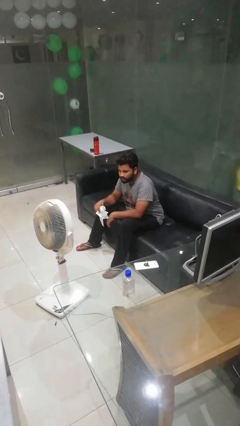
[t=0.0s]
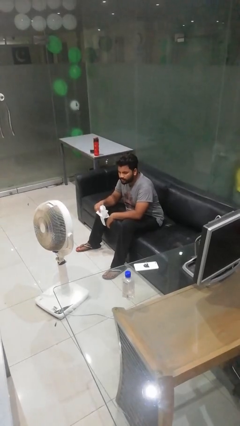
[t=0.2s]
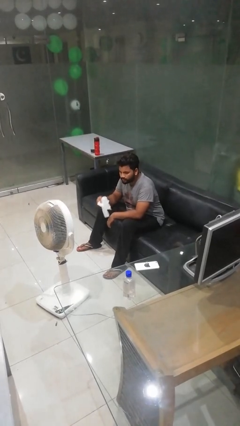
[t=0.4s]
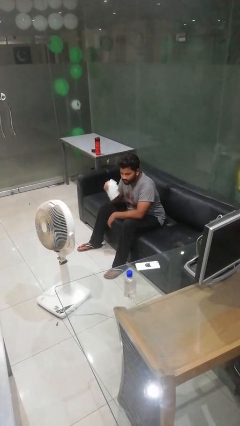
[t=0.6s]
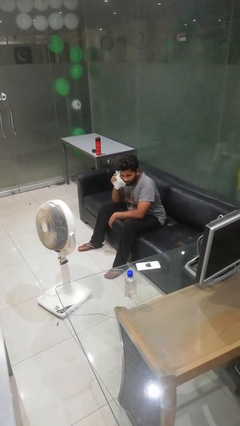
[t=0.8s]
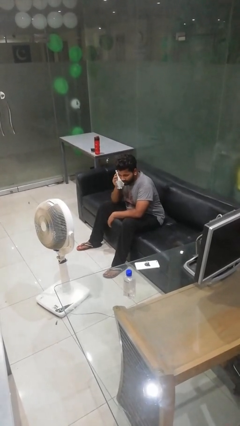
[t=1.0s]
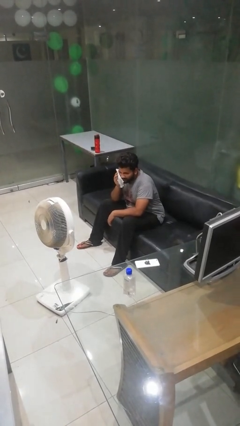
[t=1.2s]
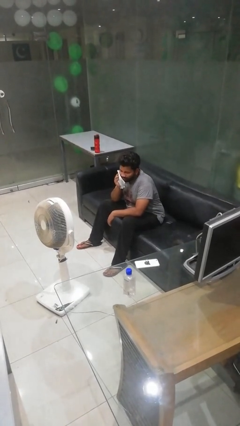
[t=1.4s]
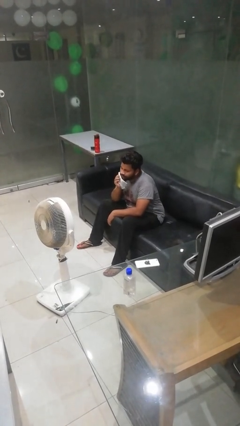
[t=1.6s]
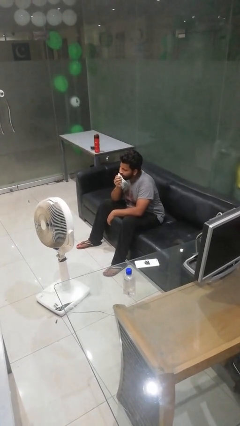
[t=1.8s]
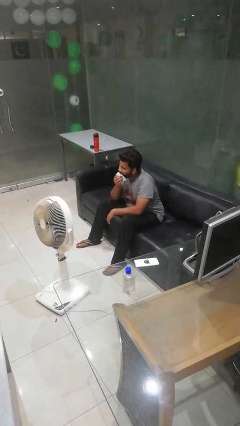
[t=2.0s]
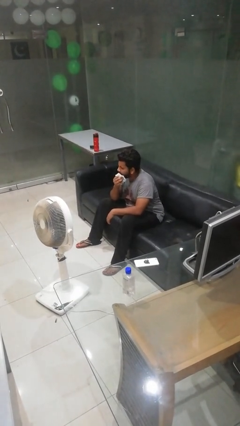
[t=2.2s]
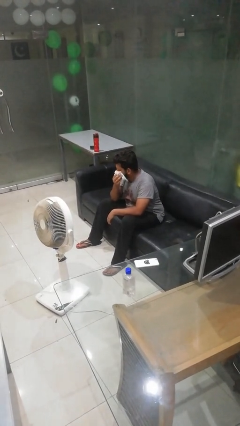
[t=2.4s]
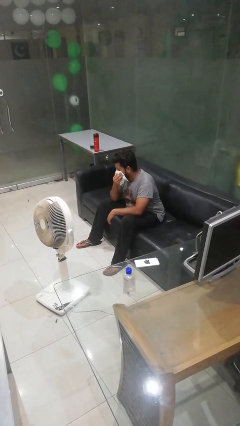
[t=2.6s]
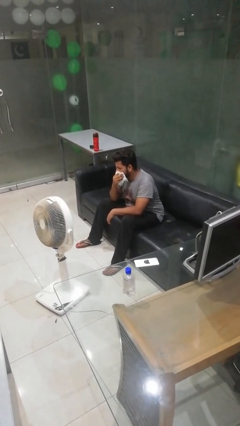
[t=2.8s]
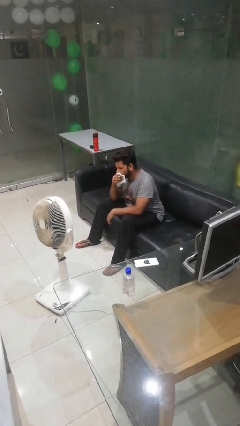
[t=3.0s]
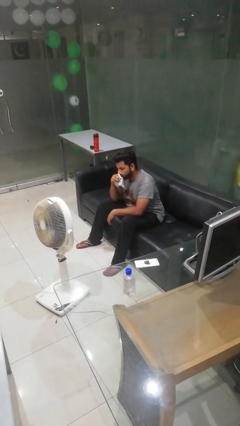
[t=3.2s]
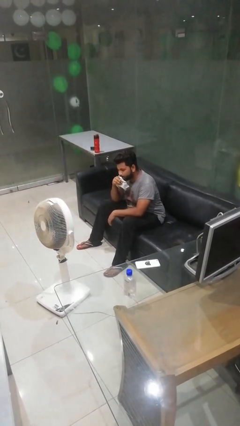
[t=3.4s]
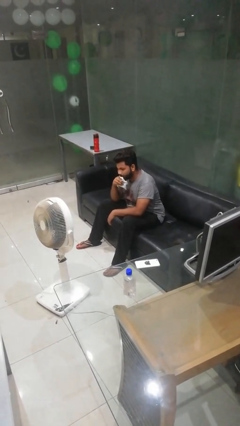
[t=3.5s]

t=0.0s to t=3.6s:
person wipes mouth with napkin

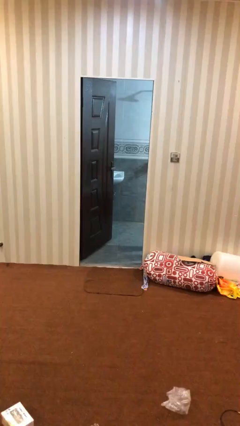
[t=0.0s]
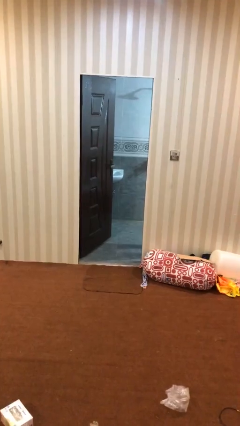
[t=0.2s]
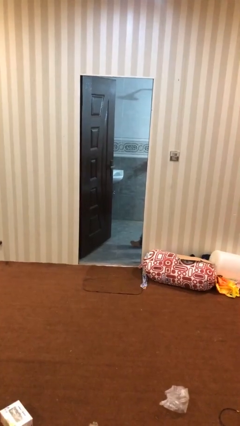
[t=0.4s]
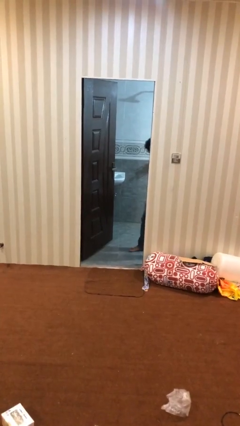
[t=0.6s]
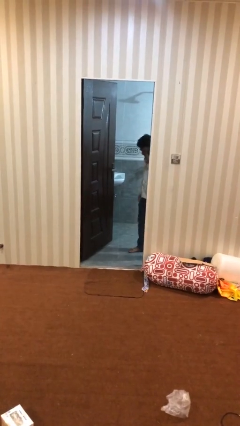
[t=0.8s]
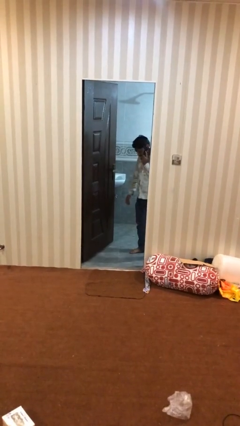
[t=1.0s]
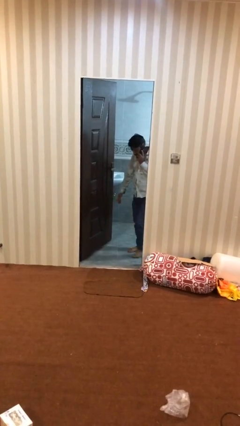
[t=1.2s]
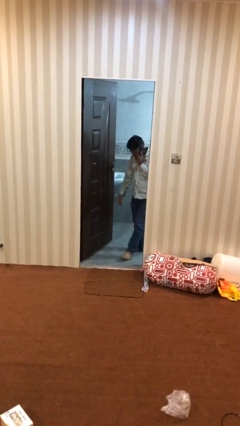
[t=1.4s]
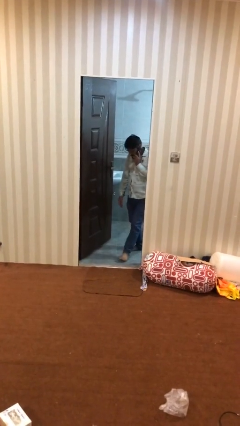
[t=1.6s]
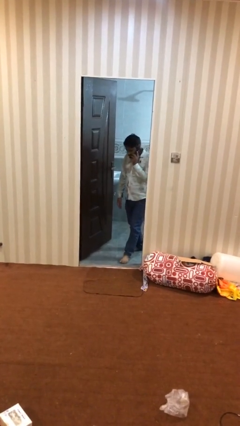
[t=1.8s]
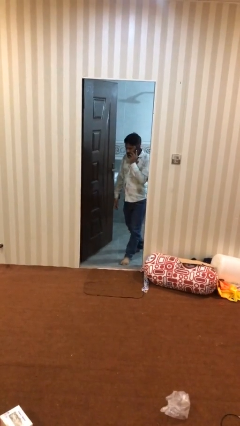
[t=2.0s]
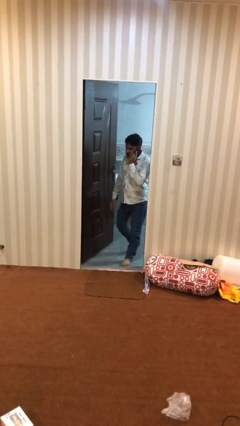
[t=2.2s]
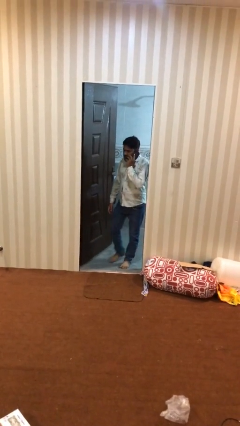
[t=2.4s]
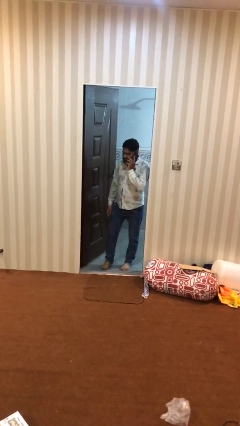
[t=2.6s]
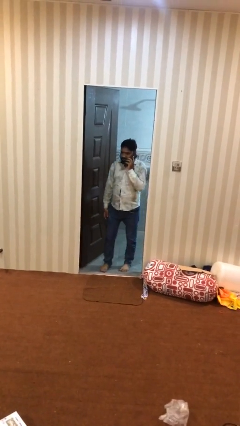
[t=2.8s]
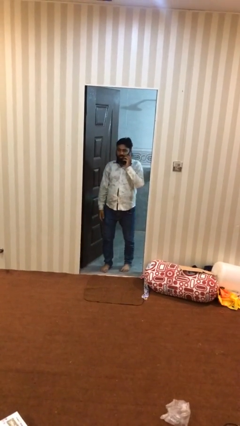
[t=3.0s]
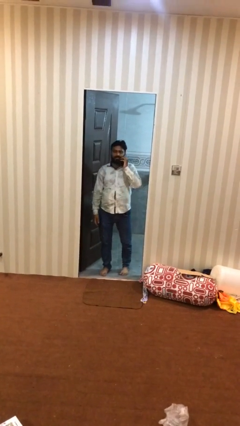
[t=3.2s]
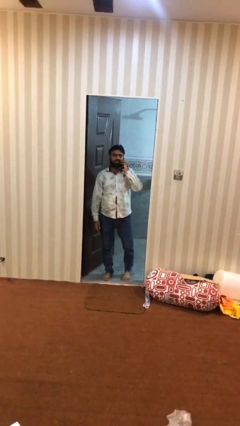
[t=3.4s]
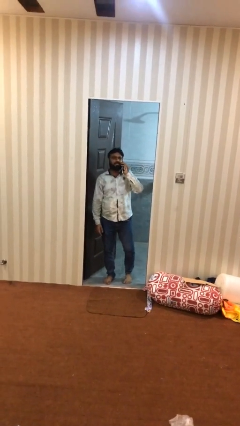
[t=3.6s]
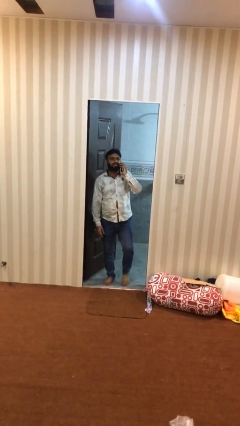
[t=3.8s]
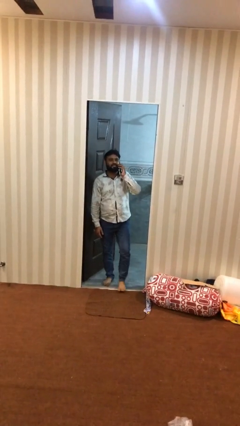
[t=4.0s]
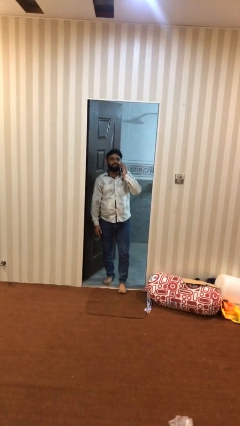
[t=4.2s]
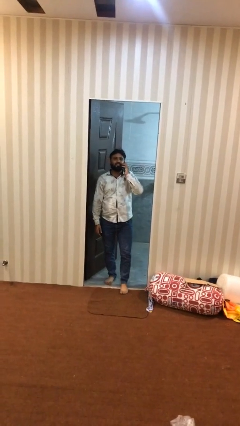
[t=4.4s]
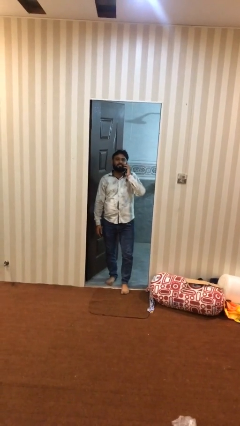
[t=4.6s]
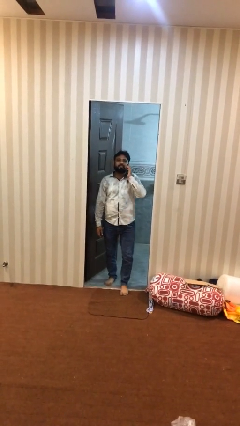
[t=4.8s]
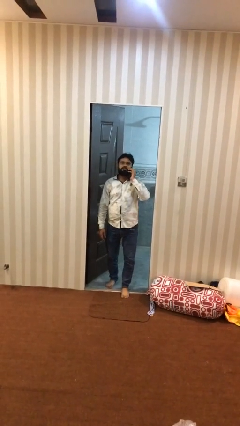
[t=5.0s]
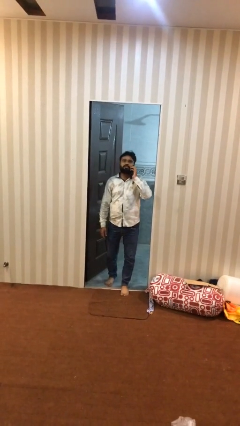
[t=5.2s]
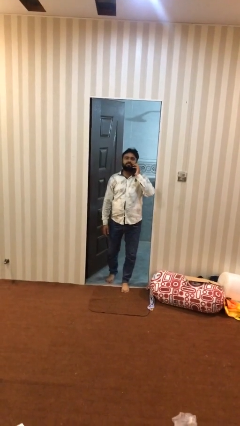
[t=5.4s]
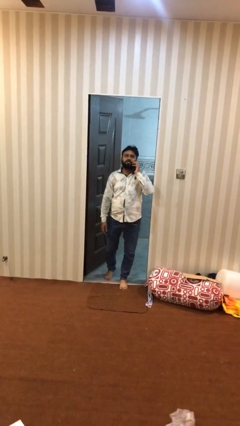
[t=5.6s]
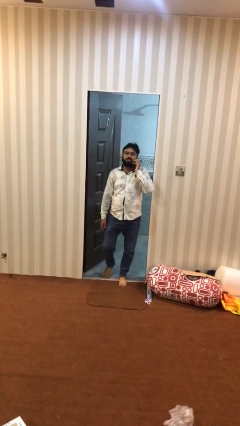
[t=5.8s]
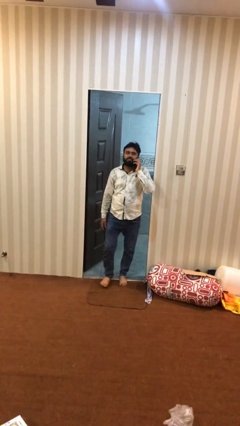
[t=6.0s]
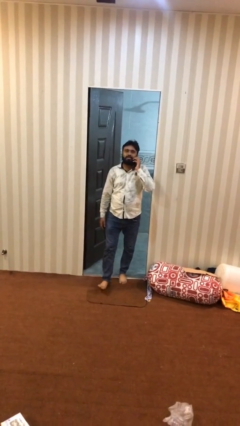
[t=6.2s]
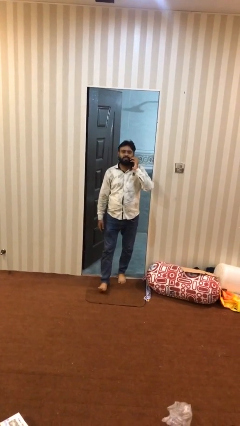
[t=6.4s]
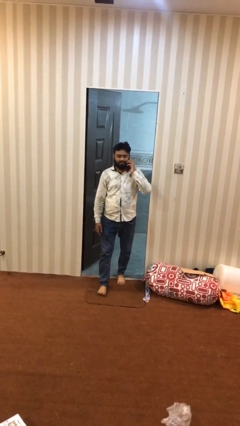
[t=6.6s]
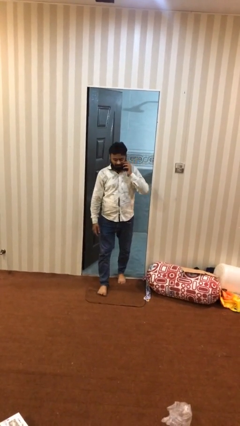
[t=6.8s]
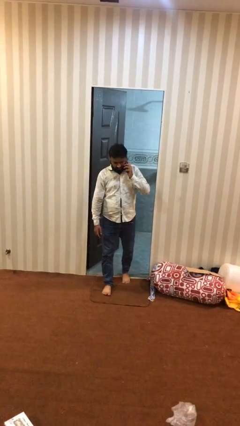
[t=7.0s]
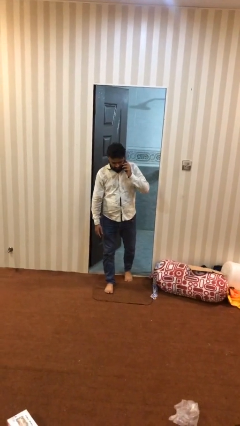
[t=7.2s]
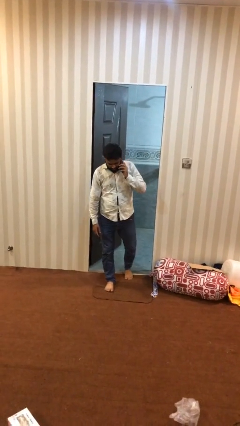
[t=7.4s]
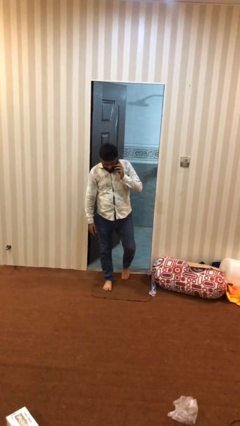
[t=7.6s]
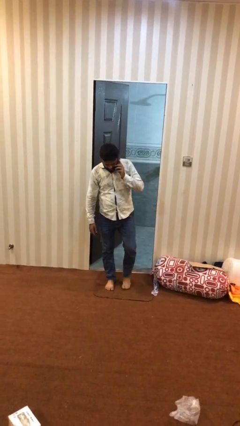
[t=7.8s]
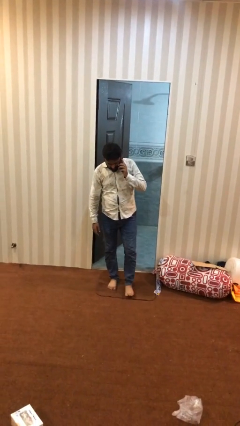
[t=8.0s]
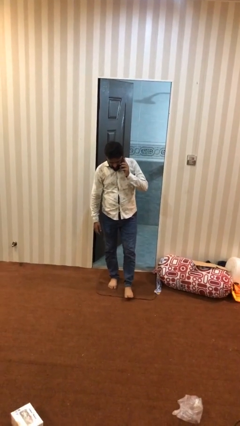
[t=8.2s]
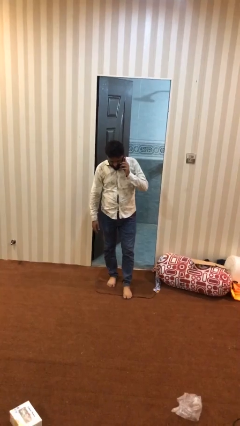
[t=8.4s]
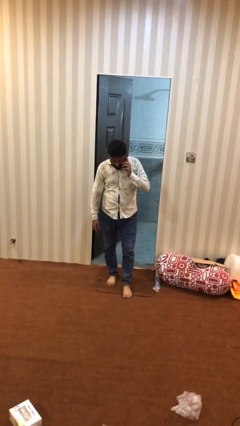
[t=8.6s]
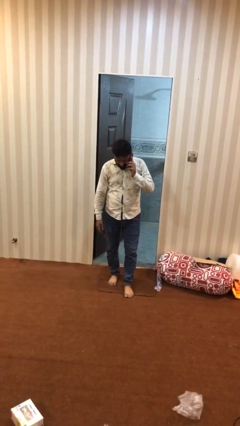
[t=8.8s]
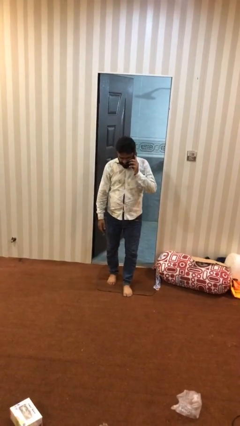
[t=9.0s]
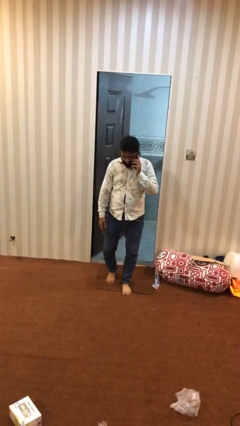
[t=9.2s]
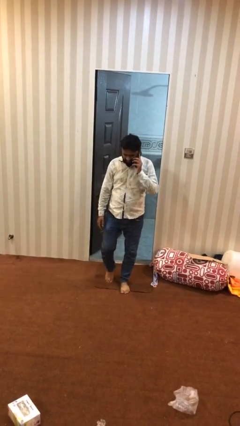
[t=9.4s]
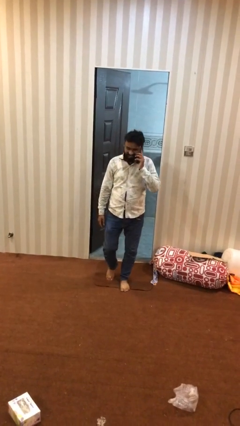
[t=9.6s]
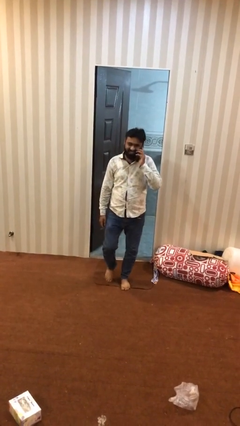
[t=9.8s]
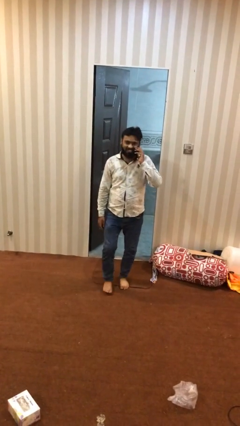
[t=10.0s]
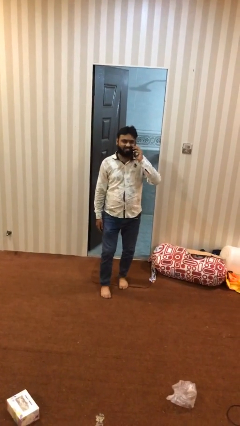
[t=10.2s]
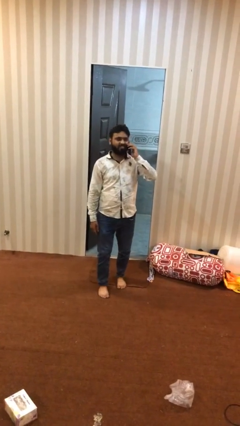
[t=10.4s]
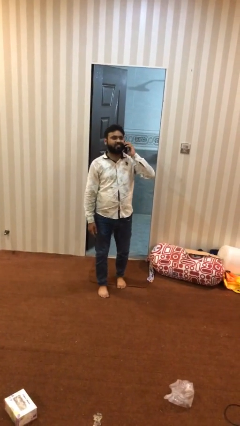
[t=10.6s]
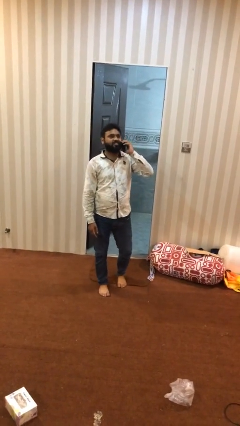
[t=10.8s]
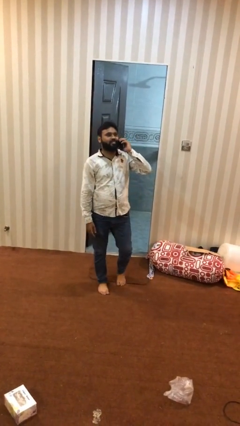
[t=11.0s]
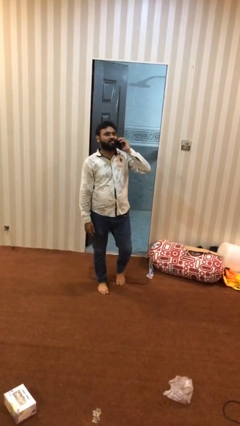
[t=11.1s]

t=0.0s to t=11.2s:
person enters scene through structure

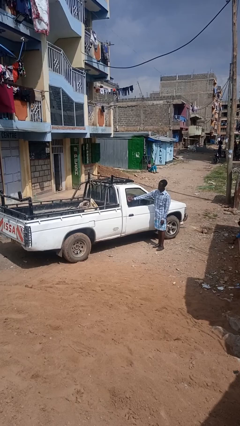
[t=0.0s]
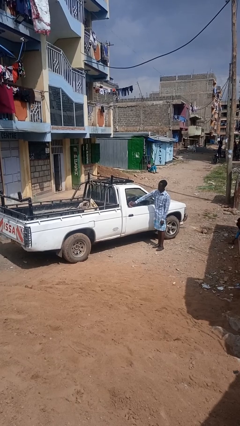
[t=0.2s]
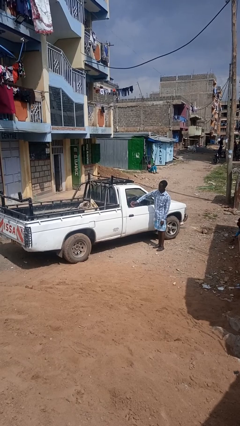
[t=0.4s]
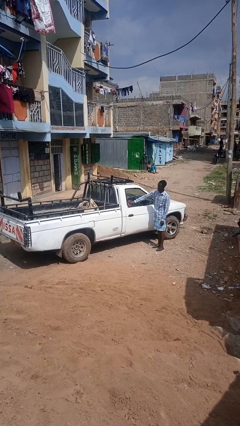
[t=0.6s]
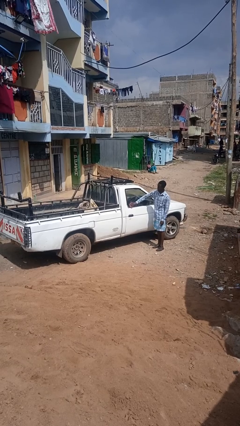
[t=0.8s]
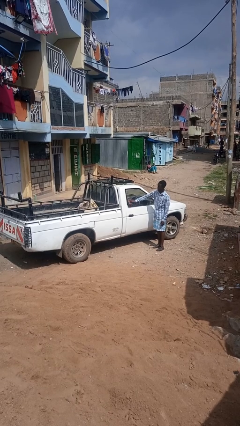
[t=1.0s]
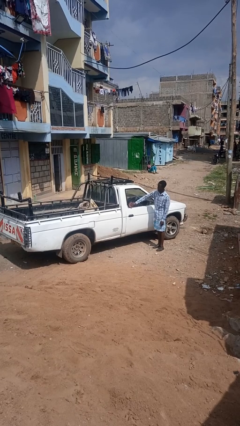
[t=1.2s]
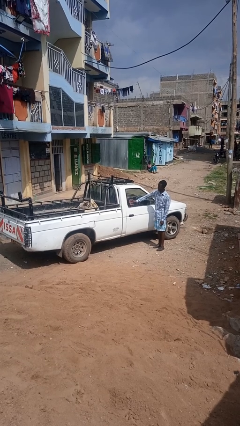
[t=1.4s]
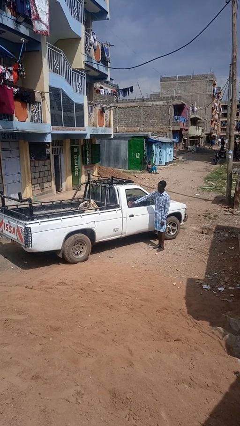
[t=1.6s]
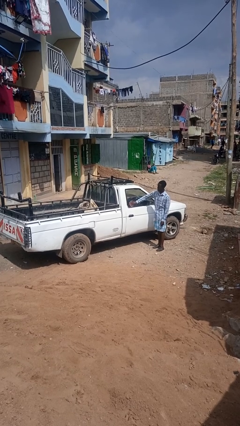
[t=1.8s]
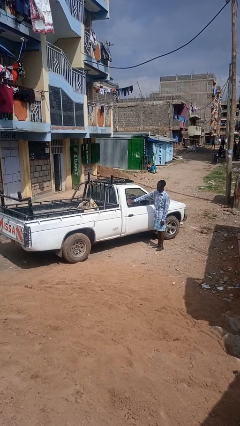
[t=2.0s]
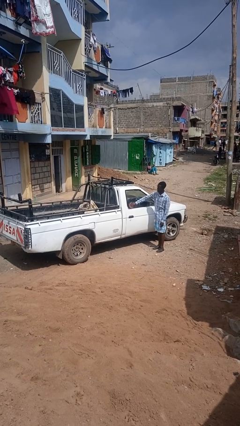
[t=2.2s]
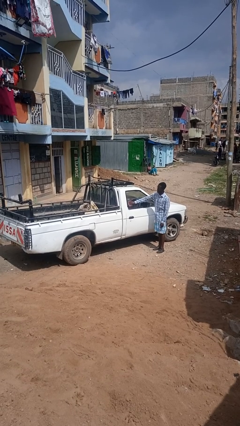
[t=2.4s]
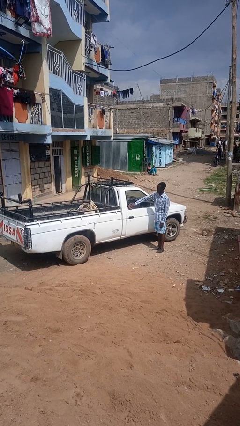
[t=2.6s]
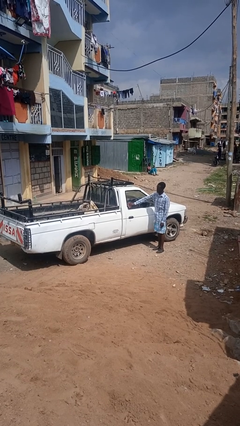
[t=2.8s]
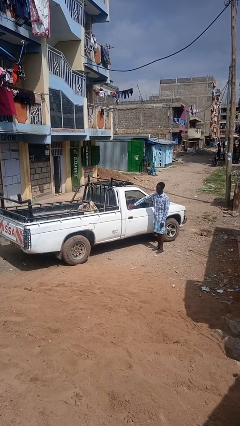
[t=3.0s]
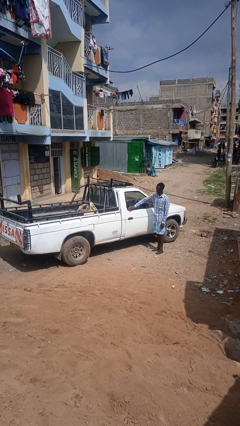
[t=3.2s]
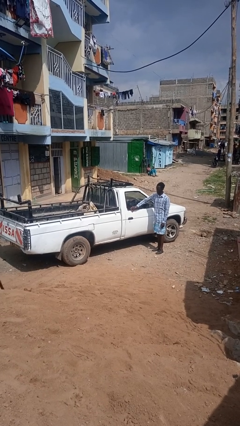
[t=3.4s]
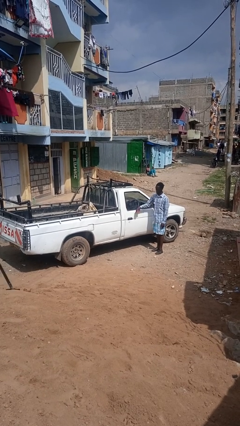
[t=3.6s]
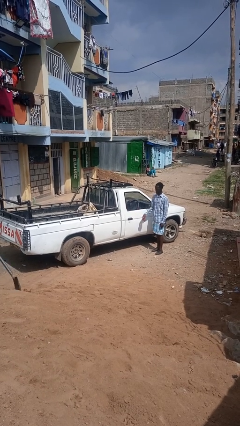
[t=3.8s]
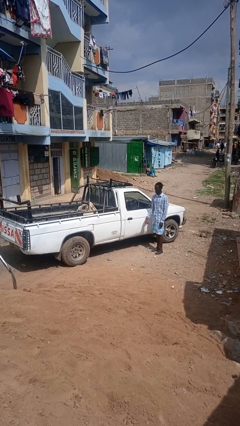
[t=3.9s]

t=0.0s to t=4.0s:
person polishes car with rag
